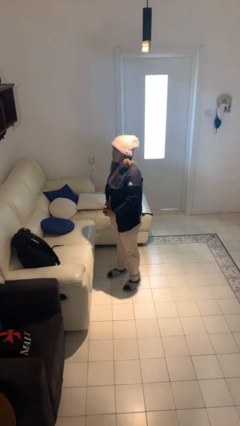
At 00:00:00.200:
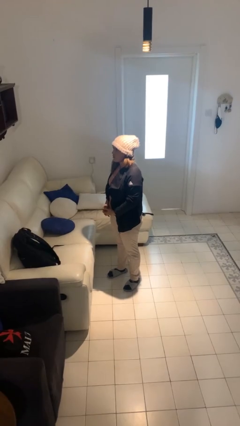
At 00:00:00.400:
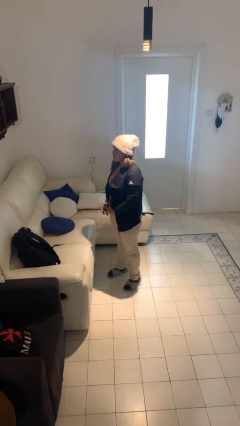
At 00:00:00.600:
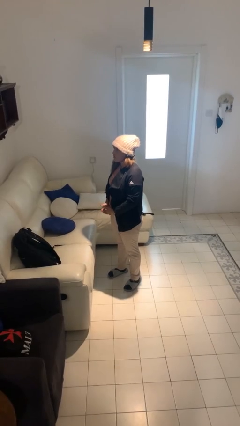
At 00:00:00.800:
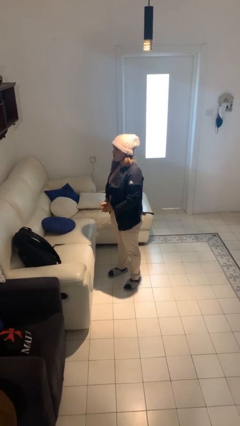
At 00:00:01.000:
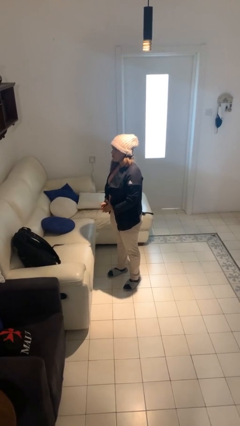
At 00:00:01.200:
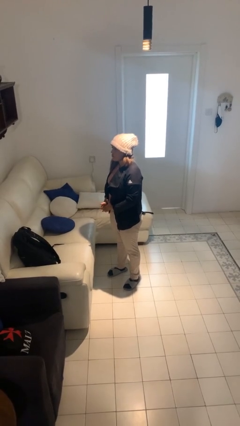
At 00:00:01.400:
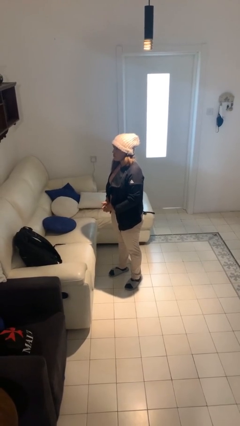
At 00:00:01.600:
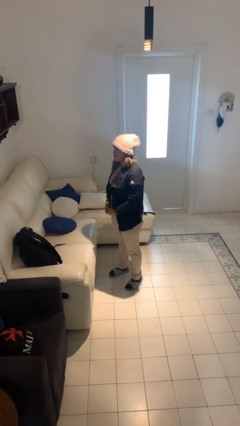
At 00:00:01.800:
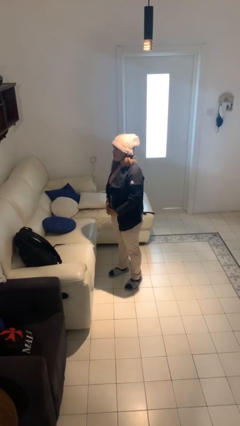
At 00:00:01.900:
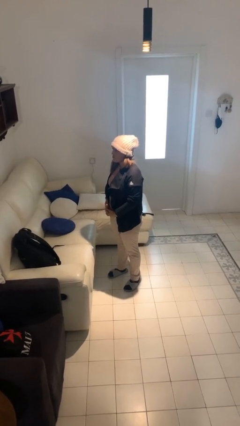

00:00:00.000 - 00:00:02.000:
person cracks knuckles

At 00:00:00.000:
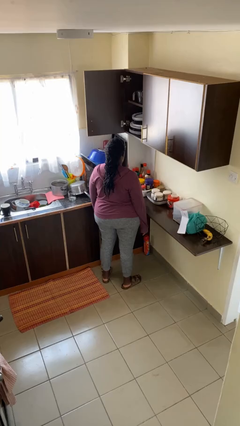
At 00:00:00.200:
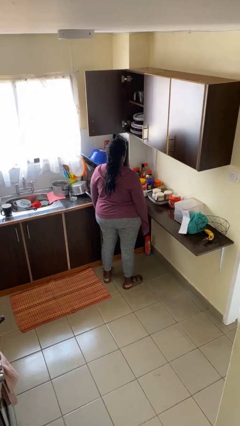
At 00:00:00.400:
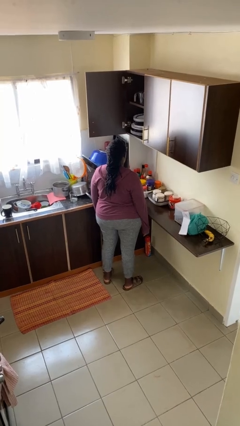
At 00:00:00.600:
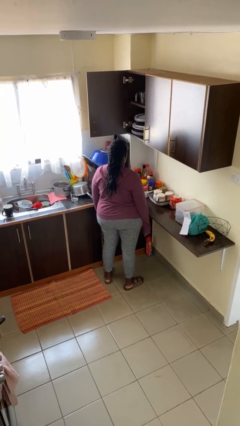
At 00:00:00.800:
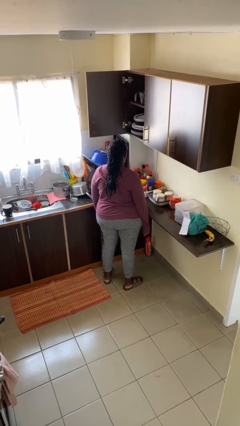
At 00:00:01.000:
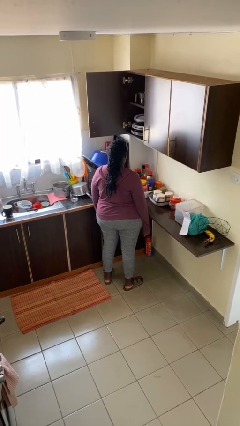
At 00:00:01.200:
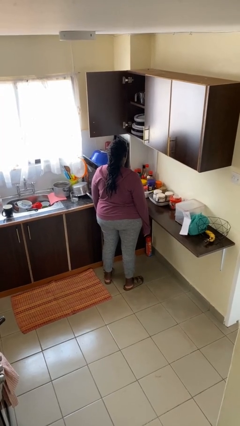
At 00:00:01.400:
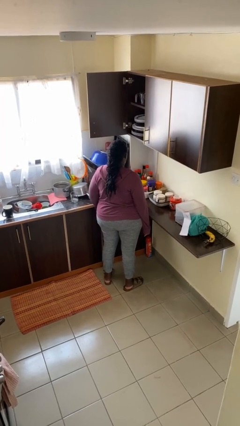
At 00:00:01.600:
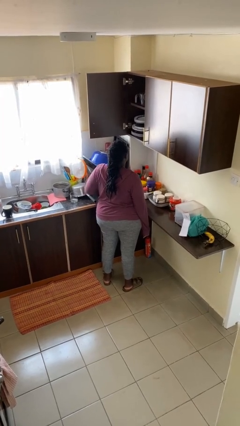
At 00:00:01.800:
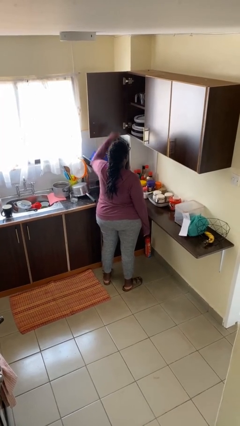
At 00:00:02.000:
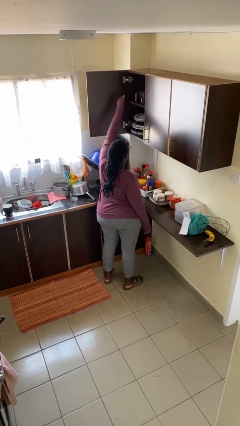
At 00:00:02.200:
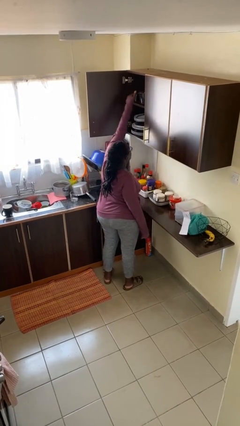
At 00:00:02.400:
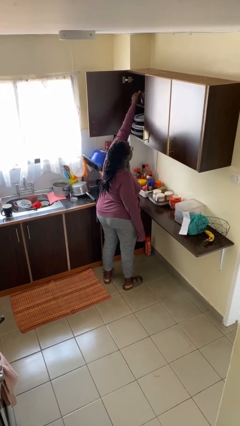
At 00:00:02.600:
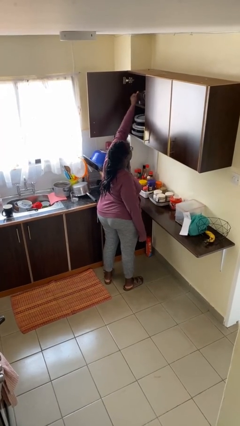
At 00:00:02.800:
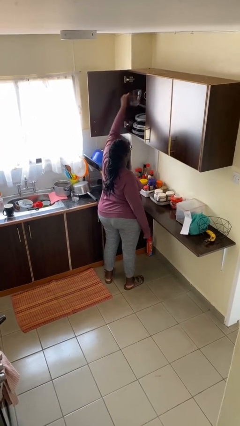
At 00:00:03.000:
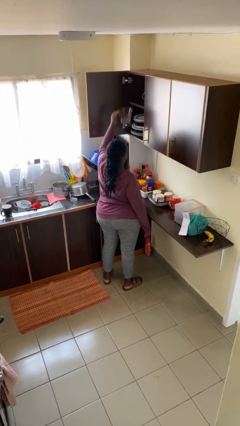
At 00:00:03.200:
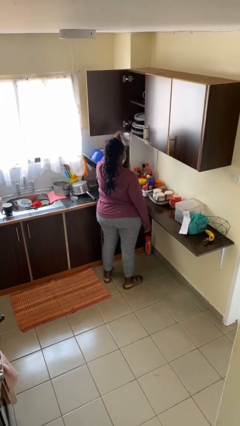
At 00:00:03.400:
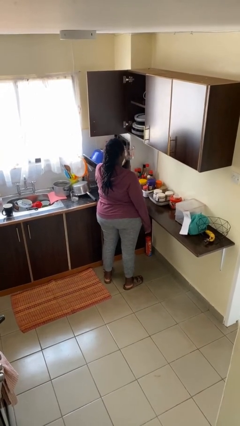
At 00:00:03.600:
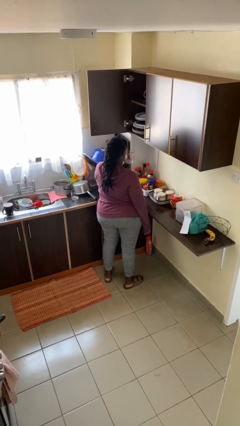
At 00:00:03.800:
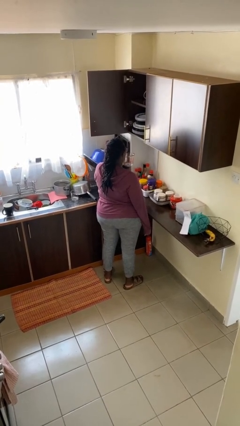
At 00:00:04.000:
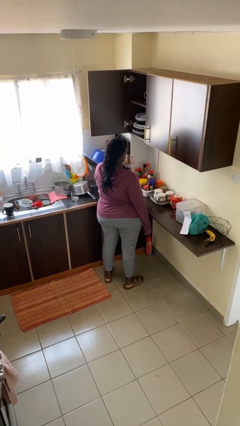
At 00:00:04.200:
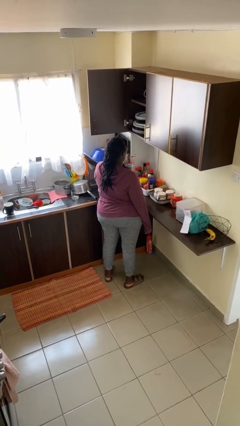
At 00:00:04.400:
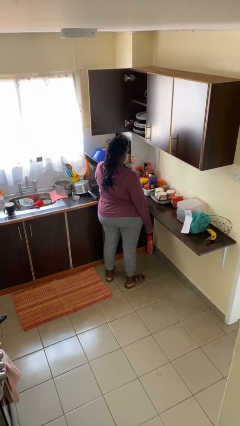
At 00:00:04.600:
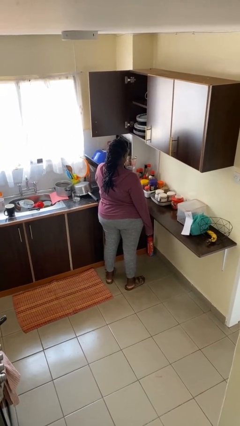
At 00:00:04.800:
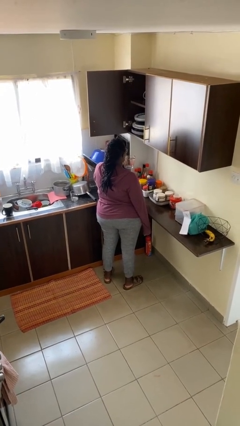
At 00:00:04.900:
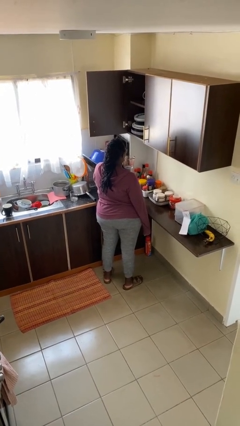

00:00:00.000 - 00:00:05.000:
person picks up object from cabinet

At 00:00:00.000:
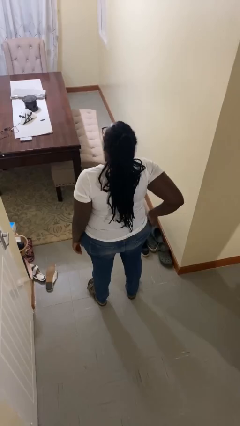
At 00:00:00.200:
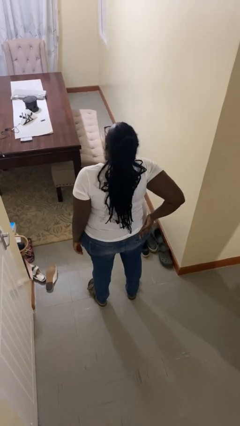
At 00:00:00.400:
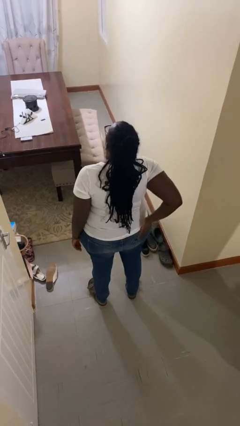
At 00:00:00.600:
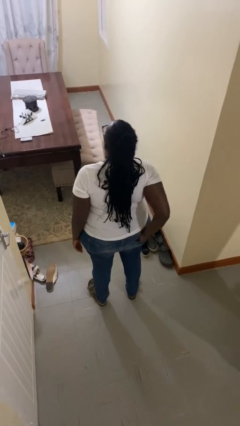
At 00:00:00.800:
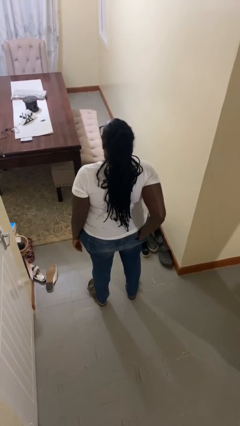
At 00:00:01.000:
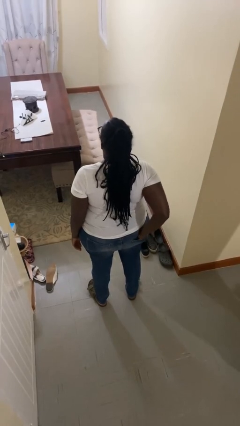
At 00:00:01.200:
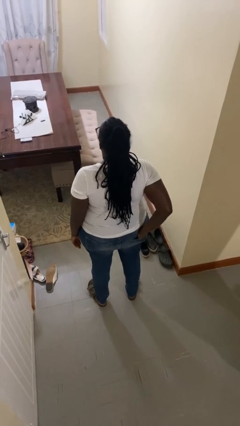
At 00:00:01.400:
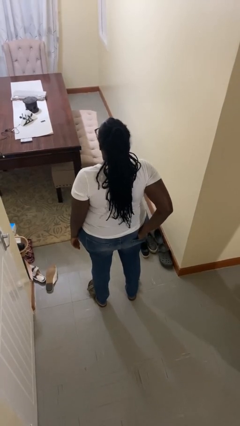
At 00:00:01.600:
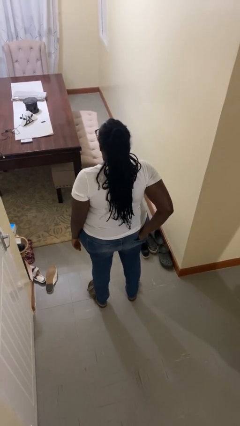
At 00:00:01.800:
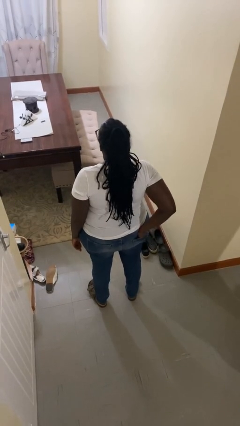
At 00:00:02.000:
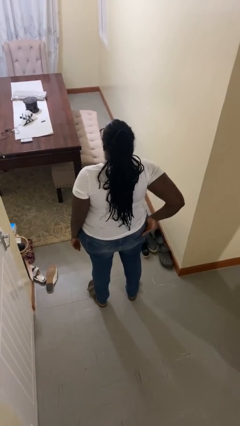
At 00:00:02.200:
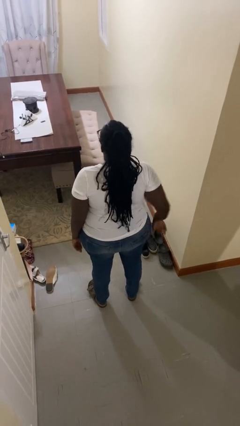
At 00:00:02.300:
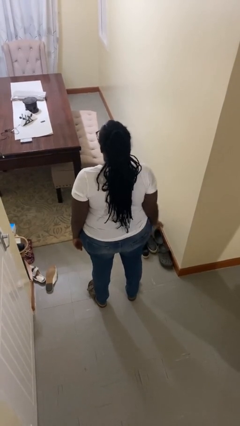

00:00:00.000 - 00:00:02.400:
person puts hands in back pockets

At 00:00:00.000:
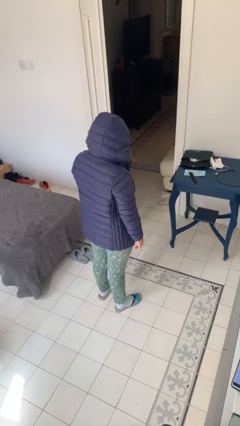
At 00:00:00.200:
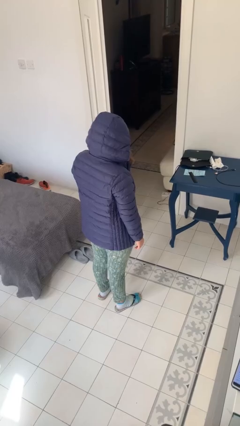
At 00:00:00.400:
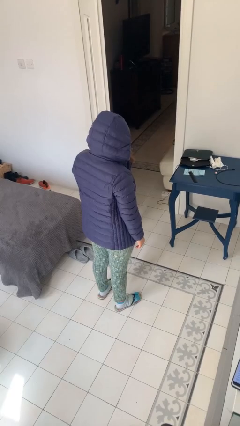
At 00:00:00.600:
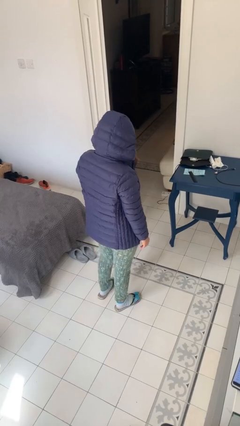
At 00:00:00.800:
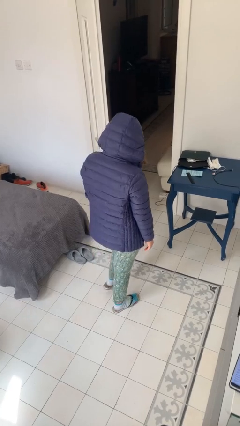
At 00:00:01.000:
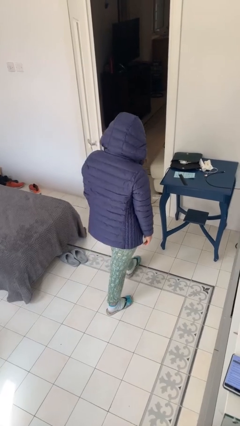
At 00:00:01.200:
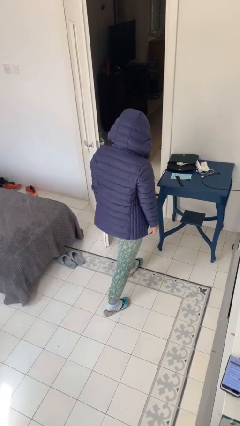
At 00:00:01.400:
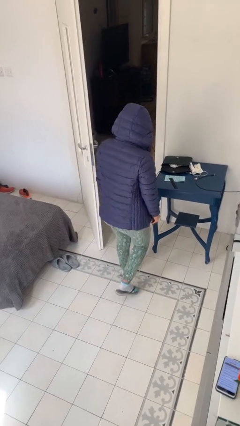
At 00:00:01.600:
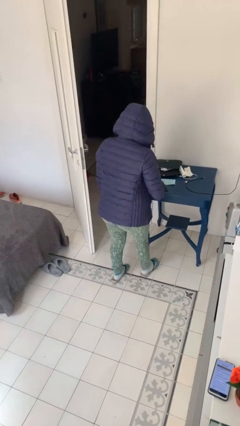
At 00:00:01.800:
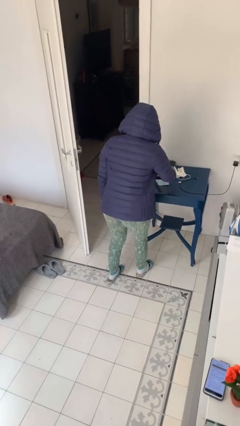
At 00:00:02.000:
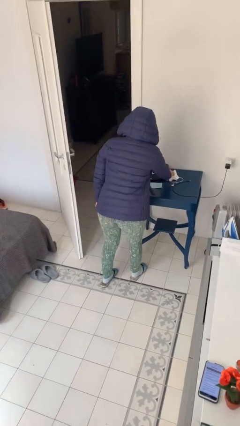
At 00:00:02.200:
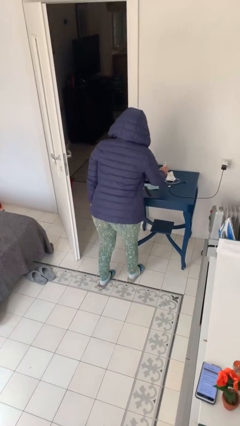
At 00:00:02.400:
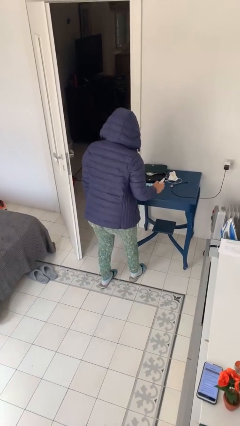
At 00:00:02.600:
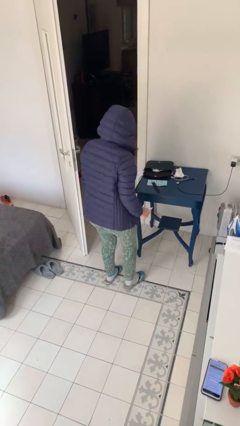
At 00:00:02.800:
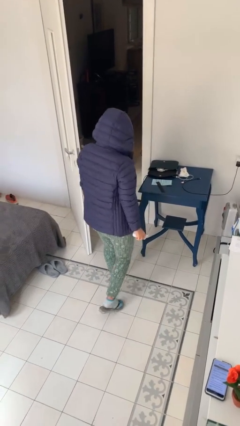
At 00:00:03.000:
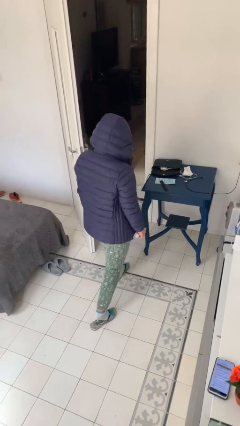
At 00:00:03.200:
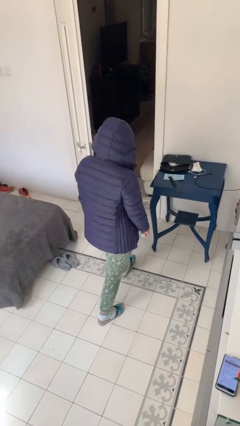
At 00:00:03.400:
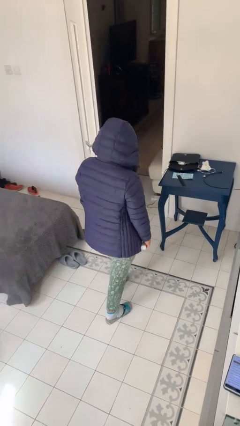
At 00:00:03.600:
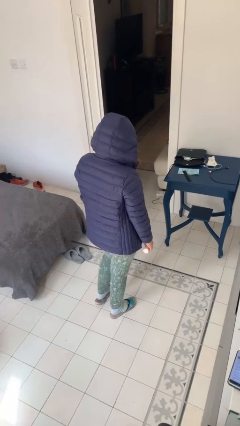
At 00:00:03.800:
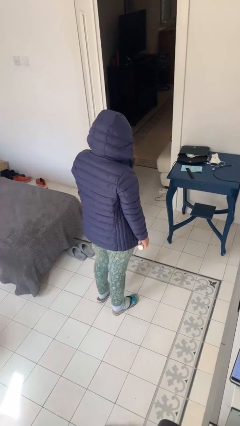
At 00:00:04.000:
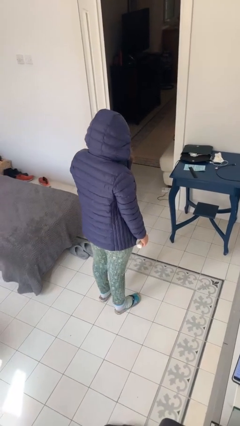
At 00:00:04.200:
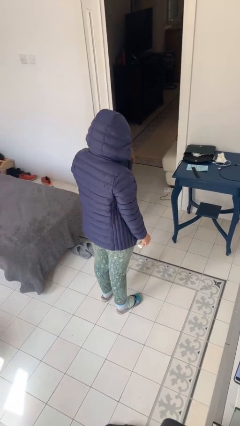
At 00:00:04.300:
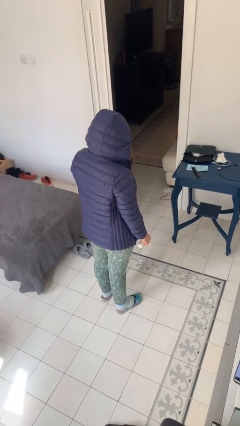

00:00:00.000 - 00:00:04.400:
person picks up object from table

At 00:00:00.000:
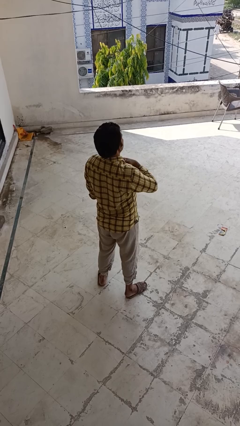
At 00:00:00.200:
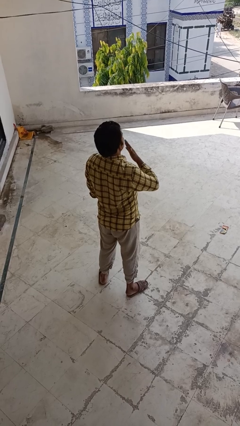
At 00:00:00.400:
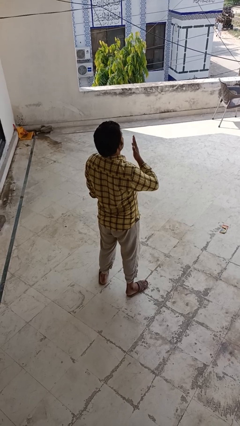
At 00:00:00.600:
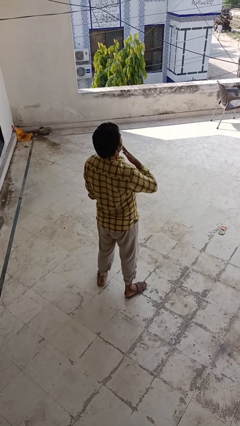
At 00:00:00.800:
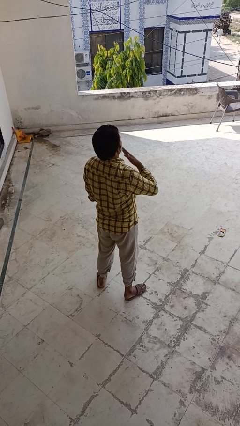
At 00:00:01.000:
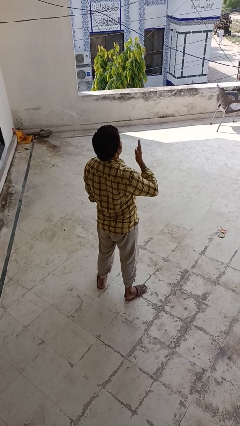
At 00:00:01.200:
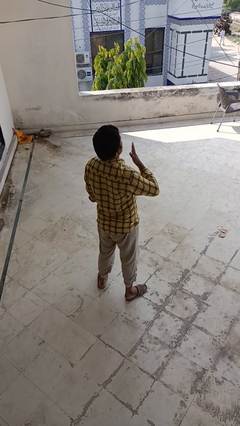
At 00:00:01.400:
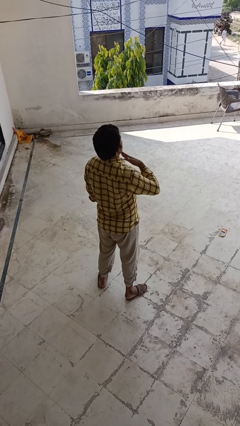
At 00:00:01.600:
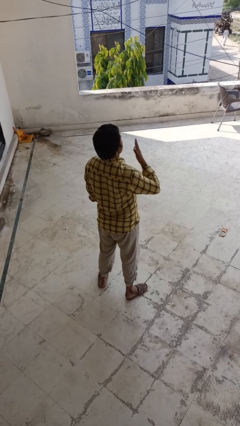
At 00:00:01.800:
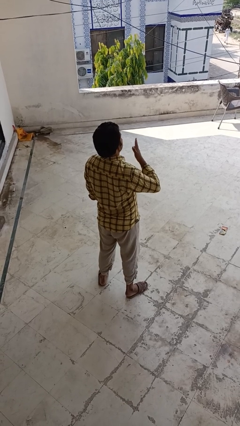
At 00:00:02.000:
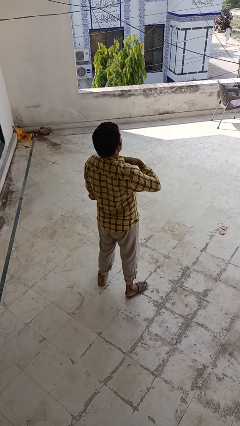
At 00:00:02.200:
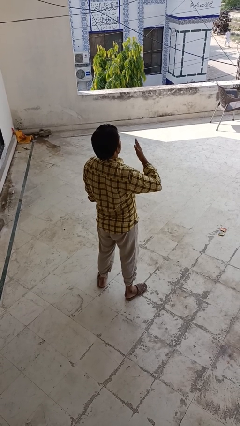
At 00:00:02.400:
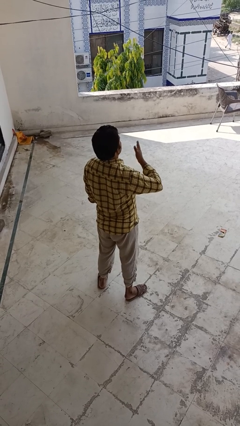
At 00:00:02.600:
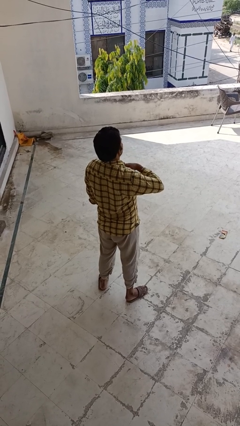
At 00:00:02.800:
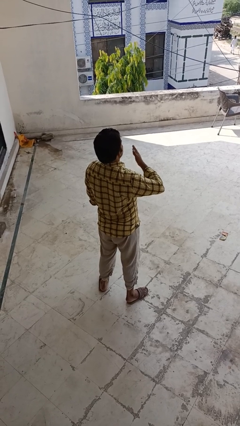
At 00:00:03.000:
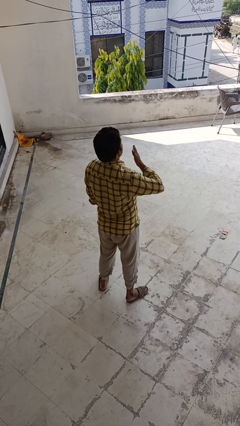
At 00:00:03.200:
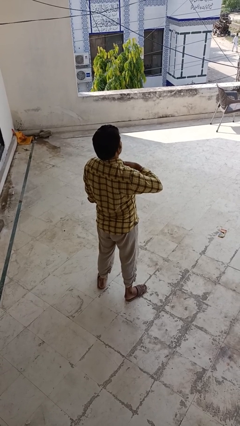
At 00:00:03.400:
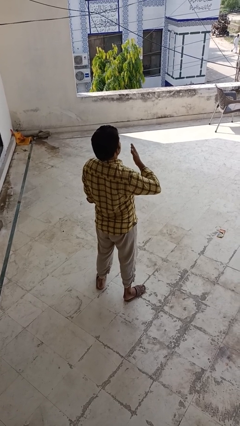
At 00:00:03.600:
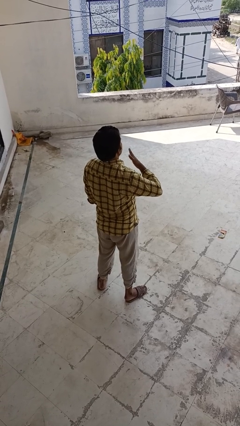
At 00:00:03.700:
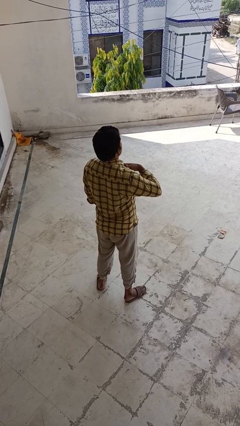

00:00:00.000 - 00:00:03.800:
person drums on chest
